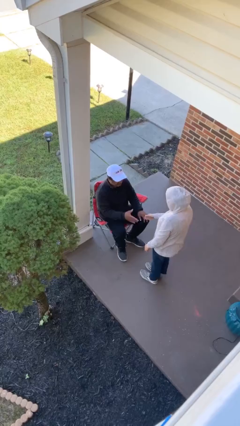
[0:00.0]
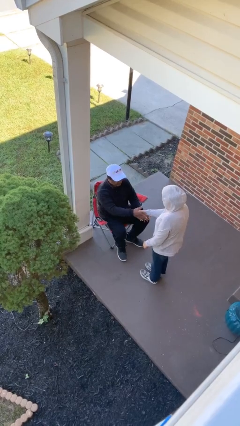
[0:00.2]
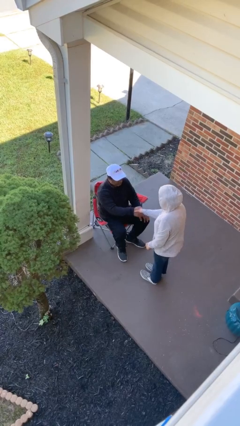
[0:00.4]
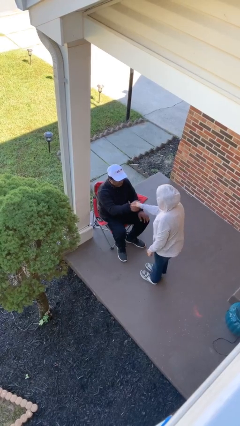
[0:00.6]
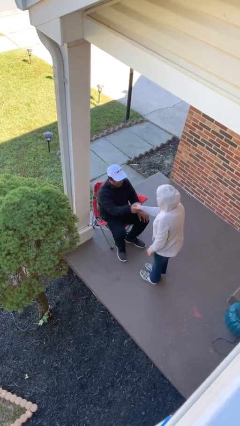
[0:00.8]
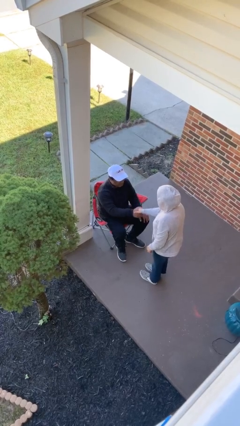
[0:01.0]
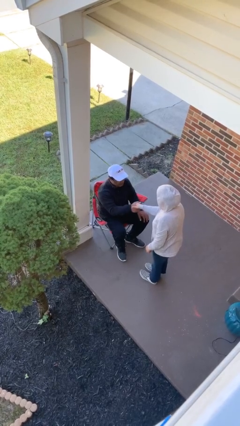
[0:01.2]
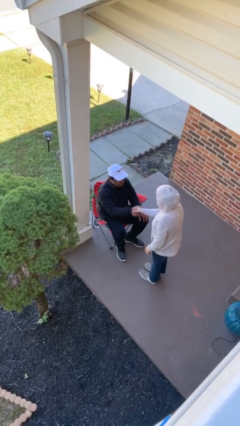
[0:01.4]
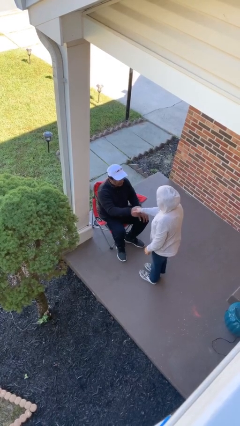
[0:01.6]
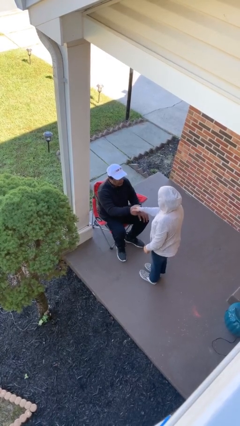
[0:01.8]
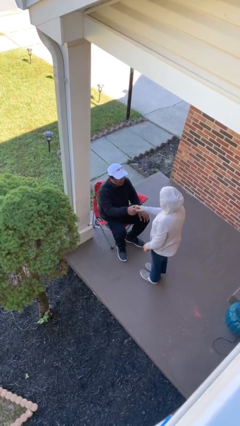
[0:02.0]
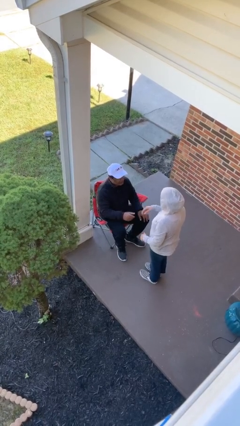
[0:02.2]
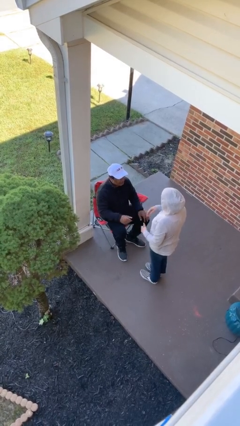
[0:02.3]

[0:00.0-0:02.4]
person shakes hand

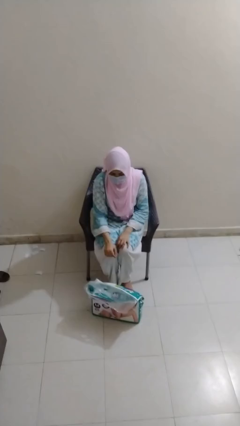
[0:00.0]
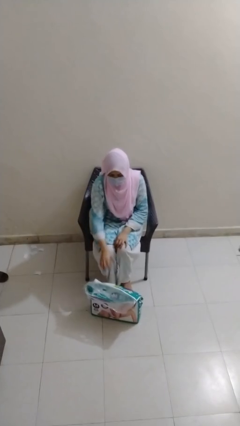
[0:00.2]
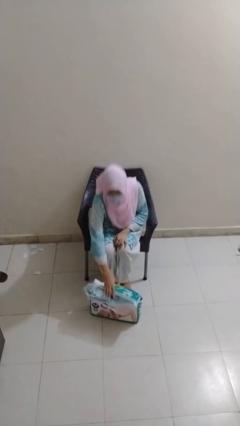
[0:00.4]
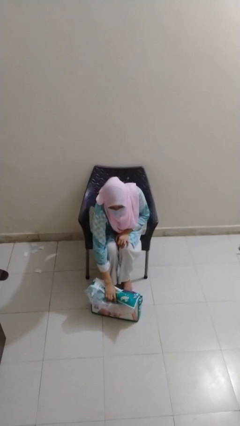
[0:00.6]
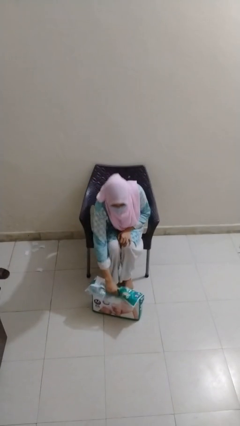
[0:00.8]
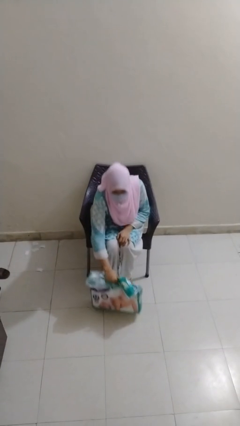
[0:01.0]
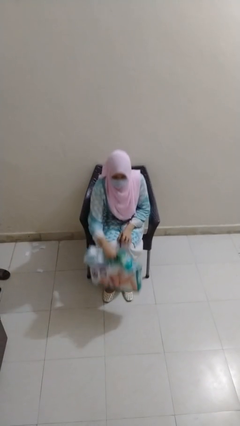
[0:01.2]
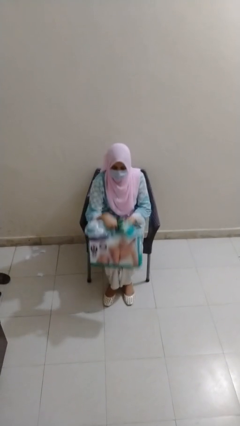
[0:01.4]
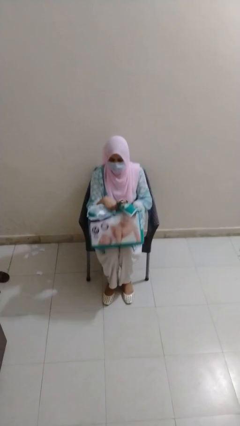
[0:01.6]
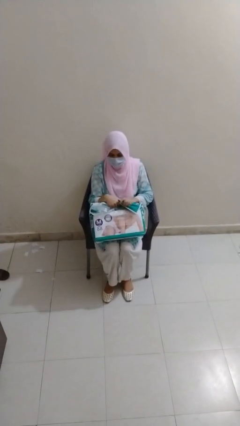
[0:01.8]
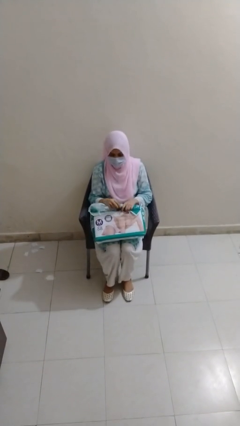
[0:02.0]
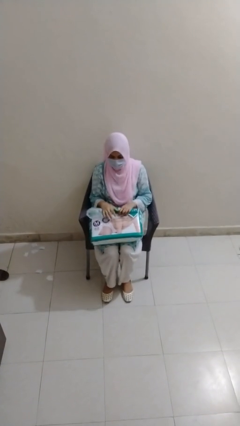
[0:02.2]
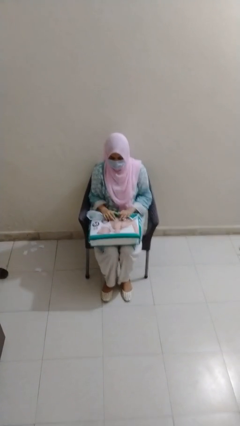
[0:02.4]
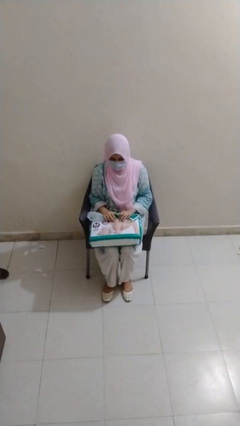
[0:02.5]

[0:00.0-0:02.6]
person picks up object from floor

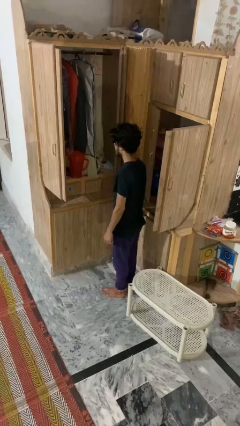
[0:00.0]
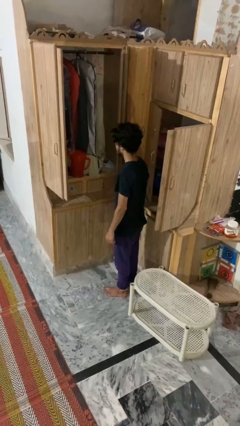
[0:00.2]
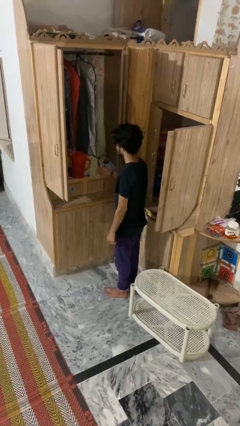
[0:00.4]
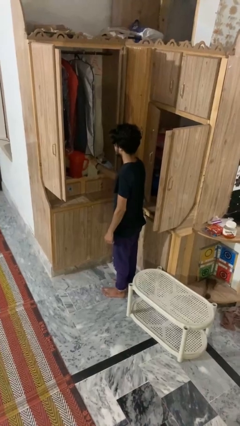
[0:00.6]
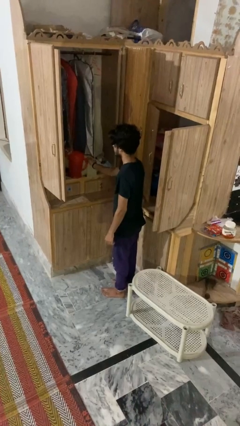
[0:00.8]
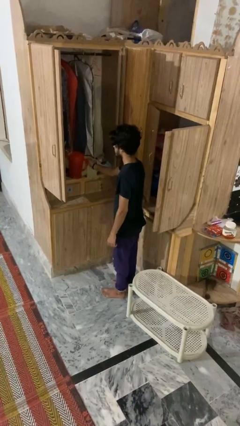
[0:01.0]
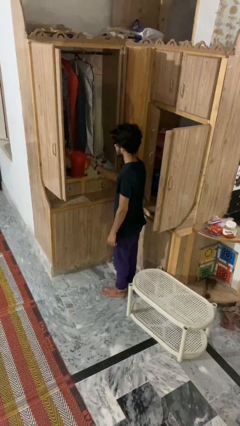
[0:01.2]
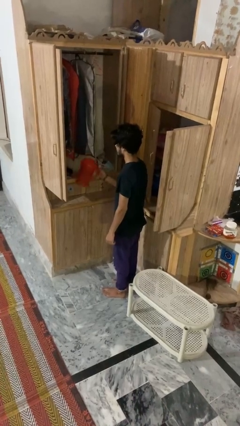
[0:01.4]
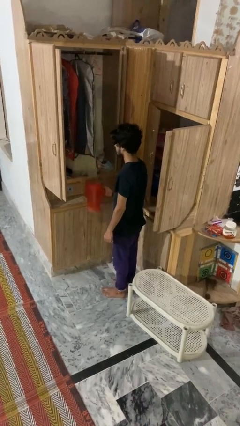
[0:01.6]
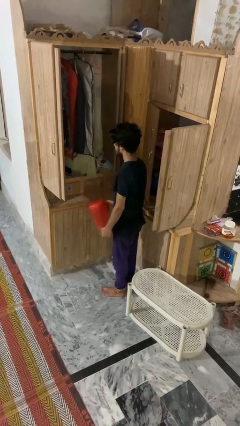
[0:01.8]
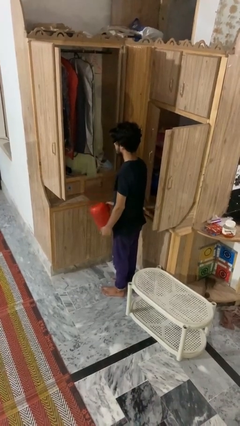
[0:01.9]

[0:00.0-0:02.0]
person picks up object from cabinet

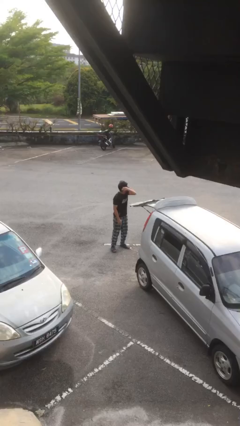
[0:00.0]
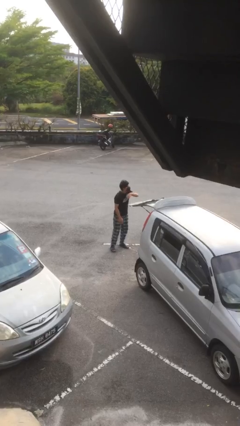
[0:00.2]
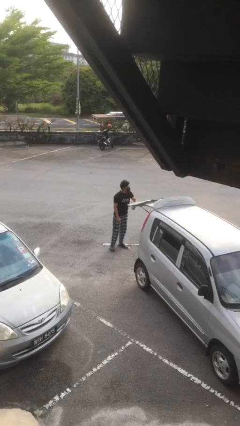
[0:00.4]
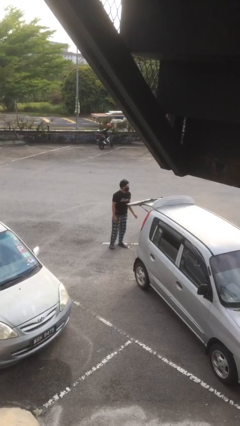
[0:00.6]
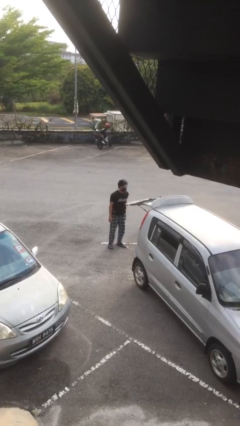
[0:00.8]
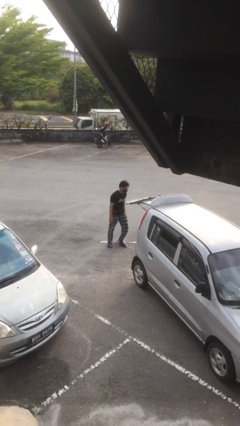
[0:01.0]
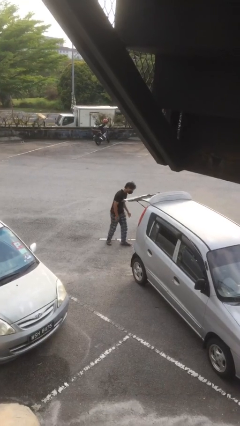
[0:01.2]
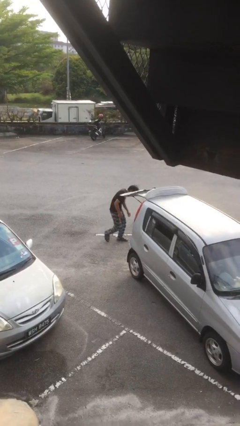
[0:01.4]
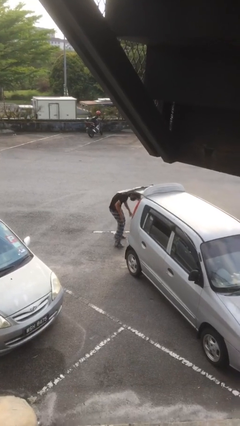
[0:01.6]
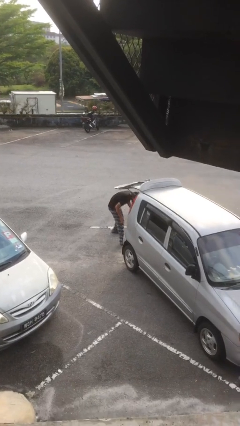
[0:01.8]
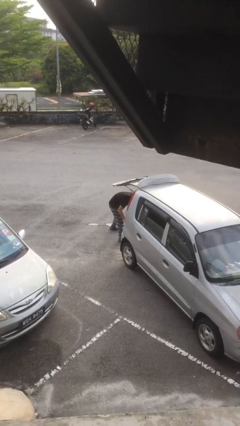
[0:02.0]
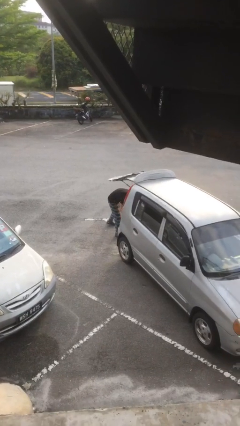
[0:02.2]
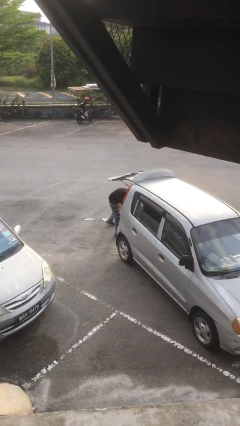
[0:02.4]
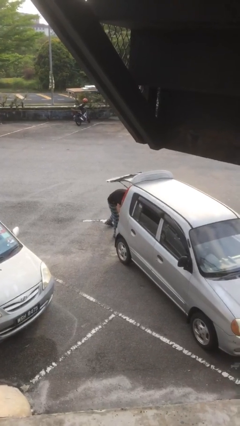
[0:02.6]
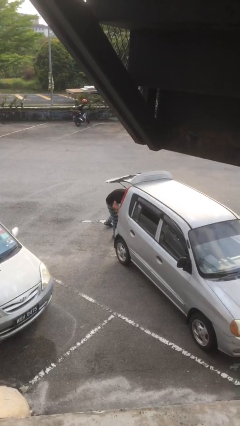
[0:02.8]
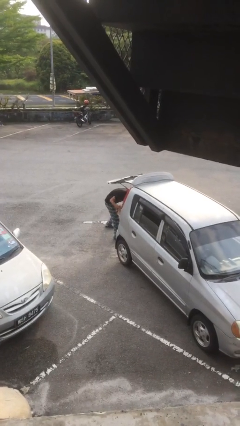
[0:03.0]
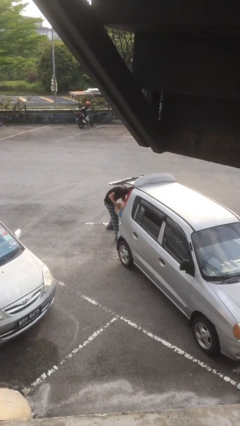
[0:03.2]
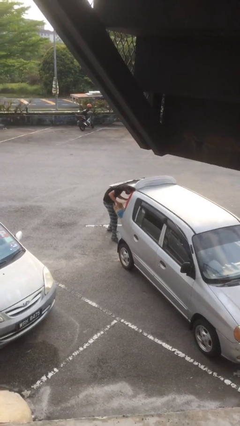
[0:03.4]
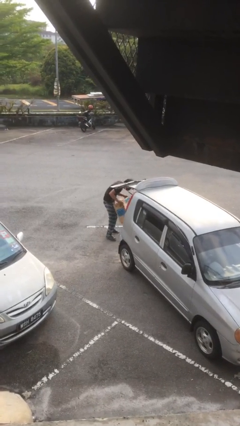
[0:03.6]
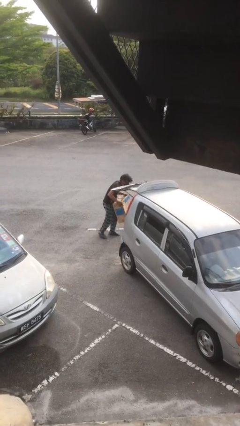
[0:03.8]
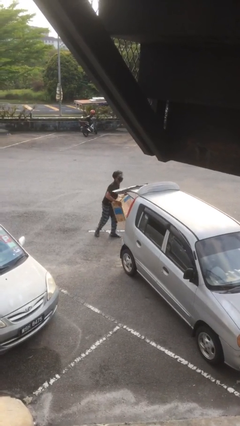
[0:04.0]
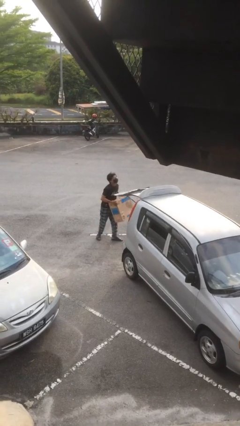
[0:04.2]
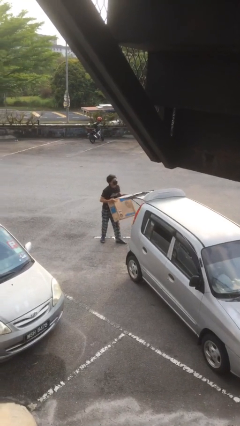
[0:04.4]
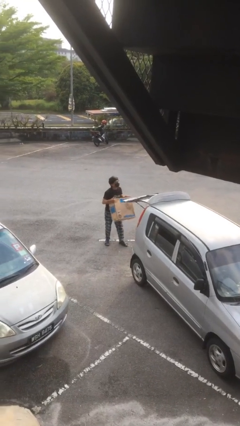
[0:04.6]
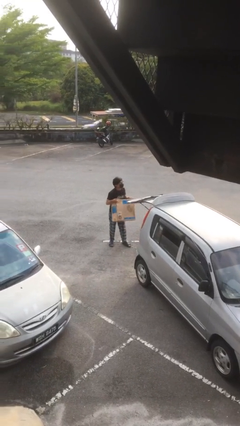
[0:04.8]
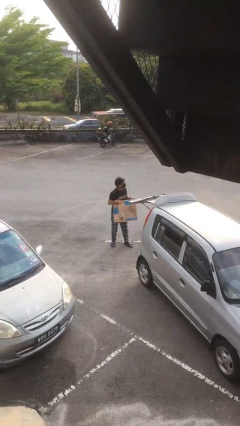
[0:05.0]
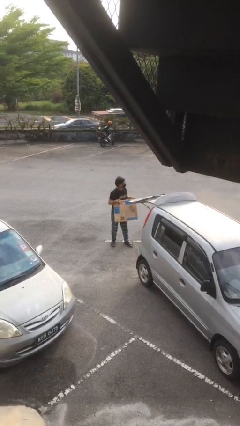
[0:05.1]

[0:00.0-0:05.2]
person unloads car

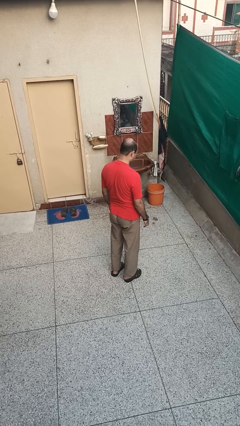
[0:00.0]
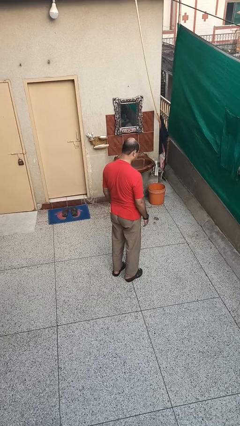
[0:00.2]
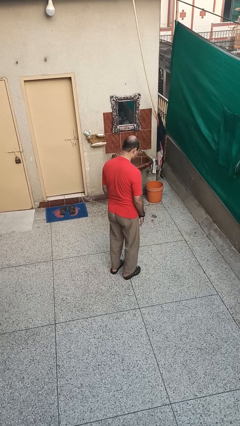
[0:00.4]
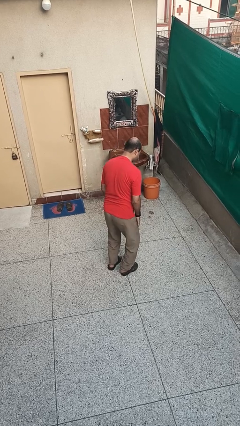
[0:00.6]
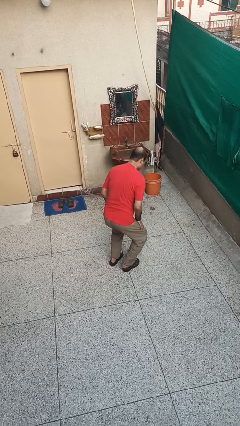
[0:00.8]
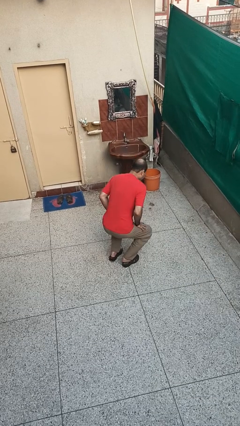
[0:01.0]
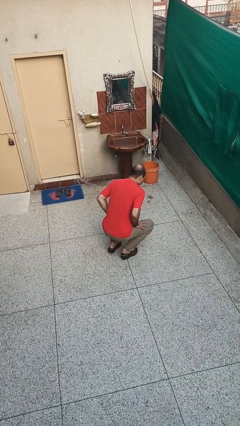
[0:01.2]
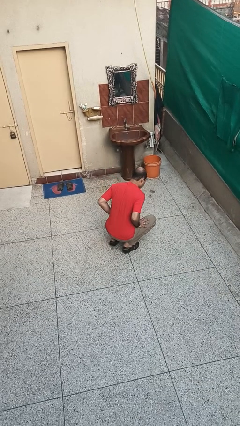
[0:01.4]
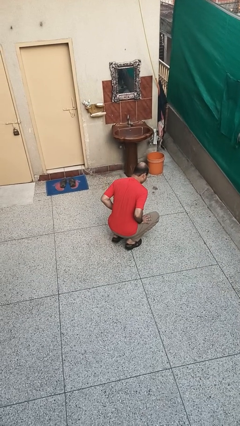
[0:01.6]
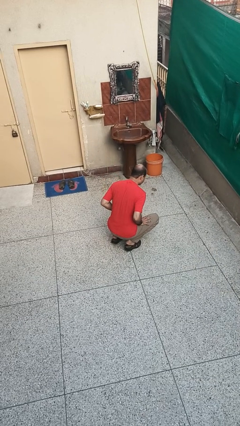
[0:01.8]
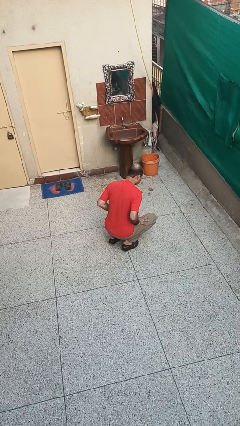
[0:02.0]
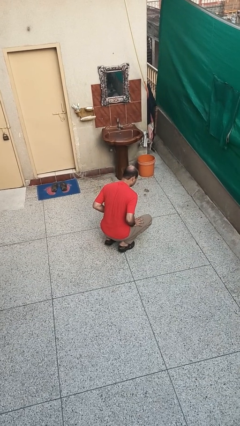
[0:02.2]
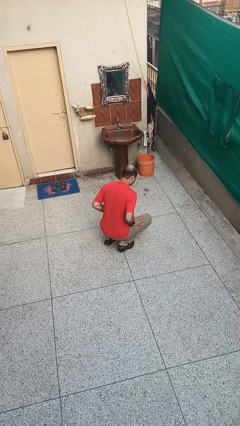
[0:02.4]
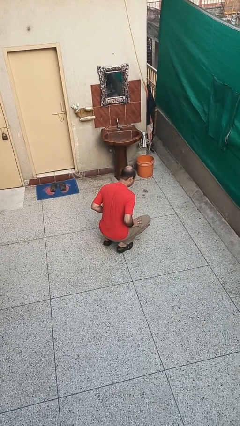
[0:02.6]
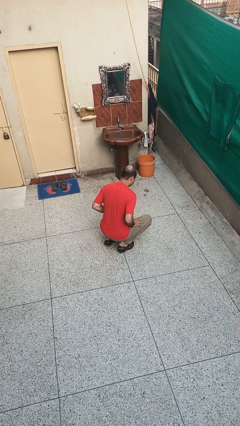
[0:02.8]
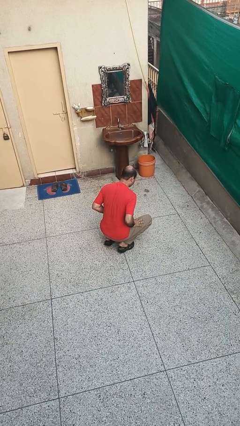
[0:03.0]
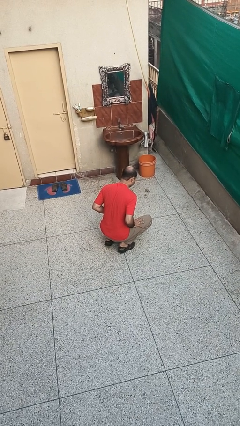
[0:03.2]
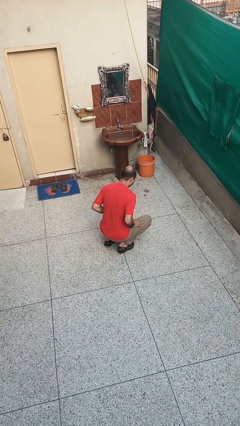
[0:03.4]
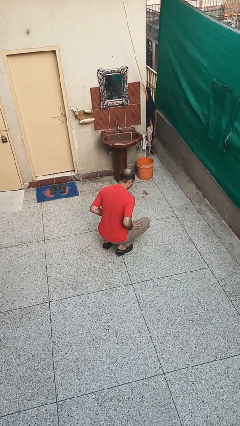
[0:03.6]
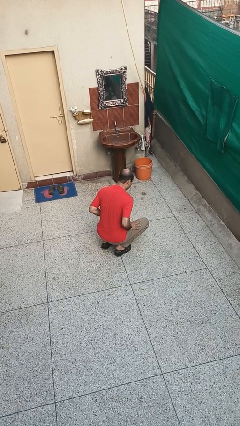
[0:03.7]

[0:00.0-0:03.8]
person squats

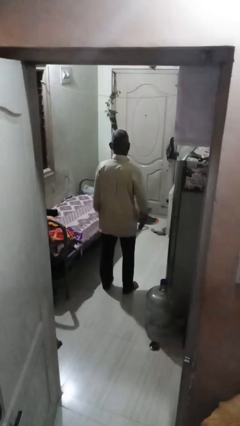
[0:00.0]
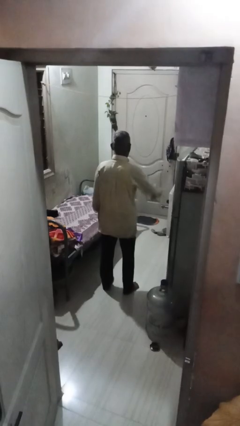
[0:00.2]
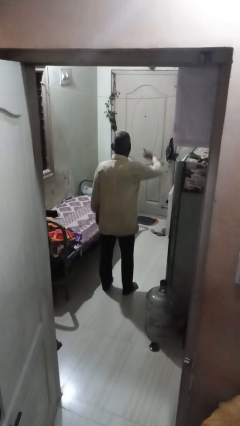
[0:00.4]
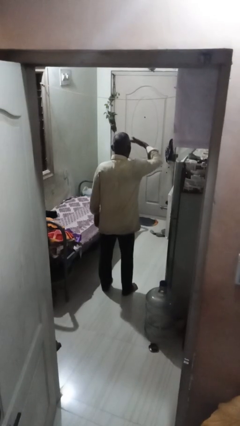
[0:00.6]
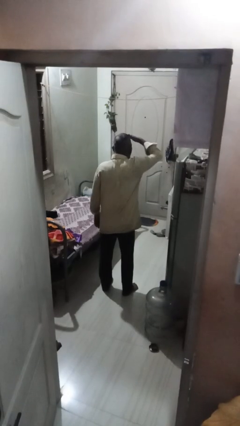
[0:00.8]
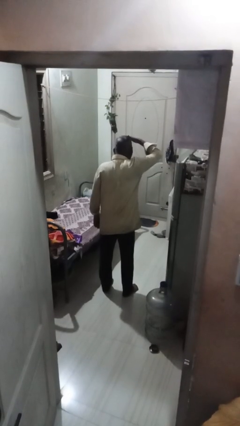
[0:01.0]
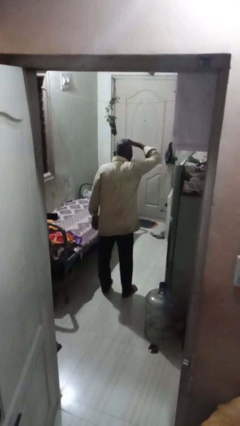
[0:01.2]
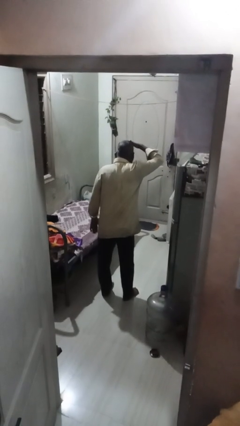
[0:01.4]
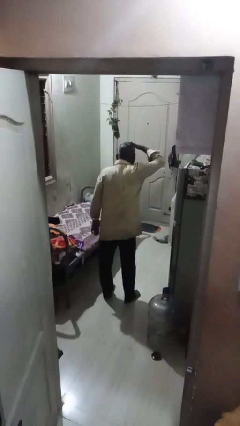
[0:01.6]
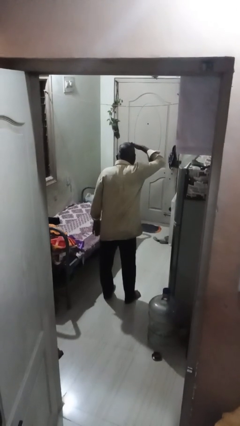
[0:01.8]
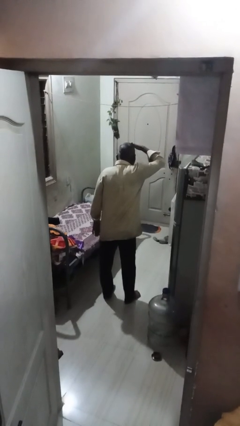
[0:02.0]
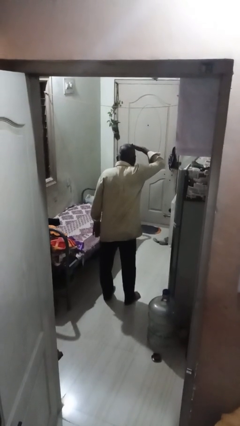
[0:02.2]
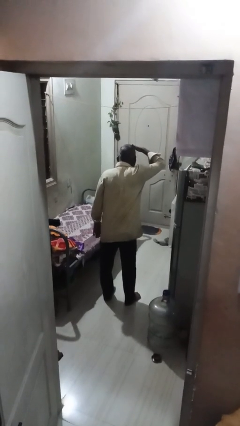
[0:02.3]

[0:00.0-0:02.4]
person shades eyes
